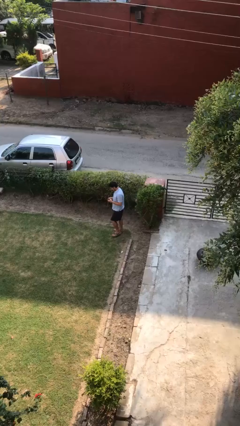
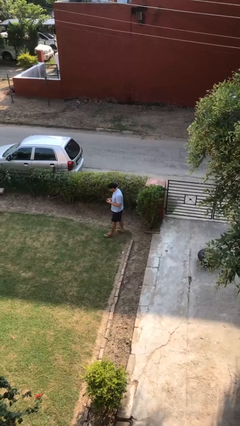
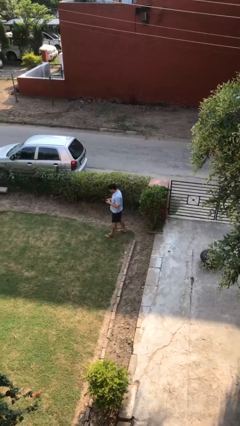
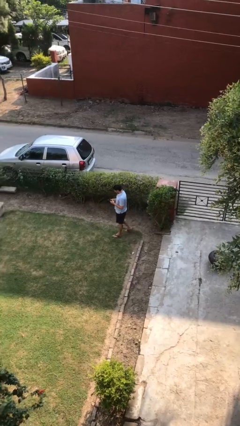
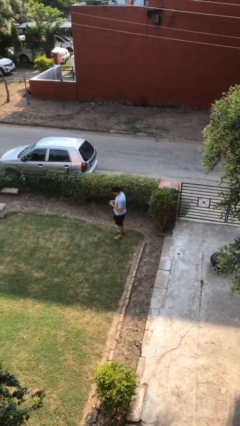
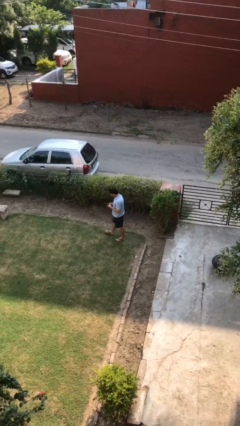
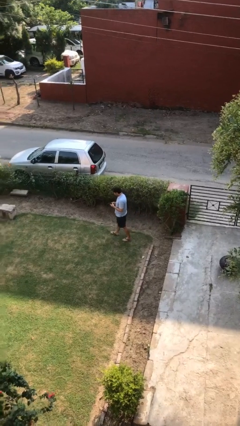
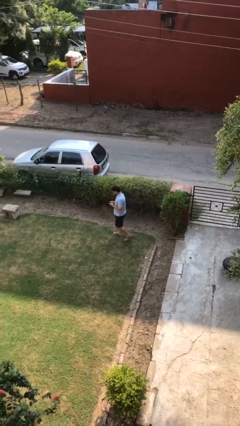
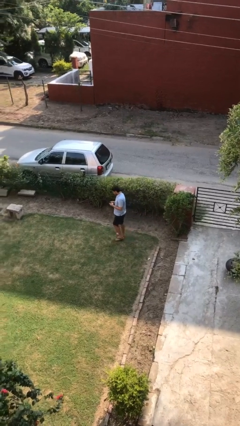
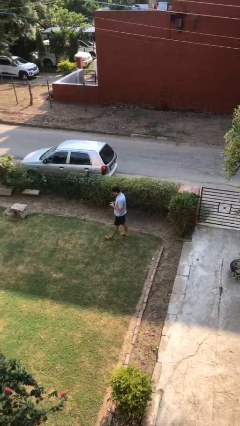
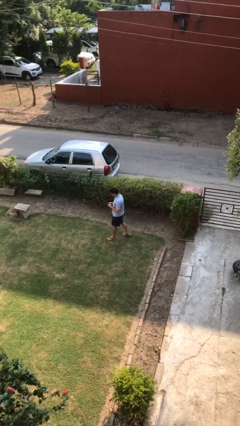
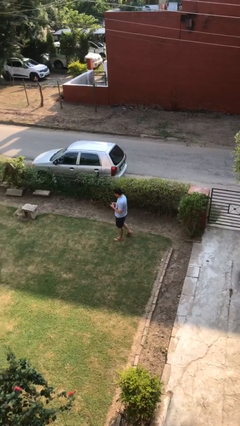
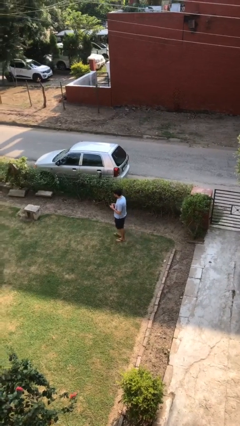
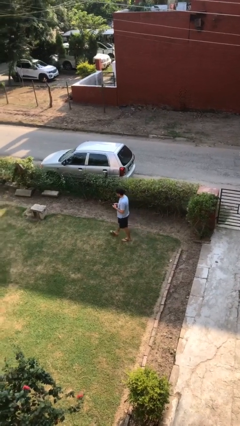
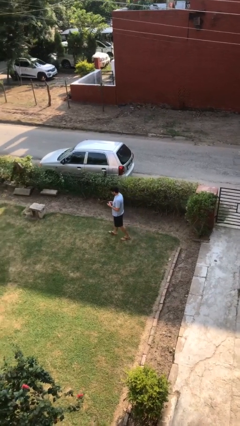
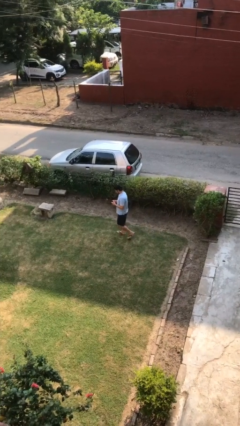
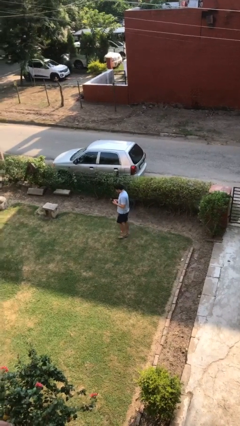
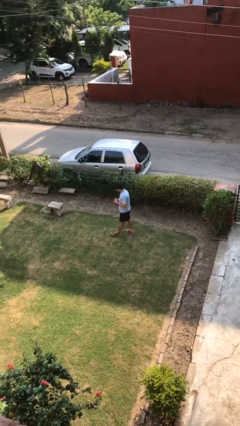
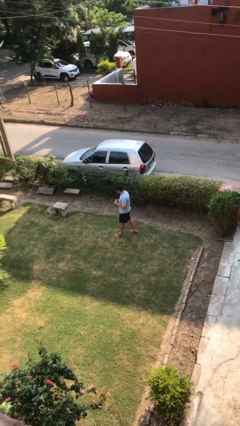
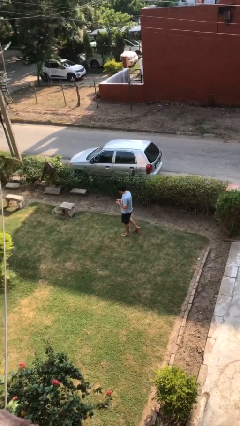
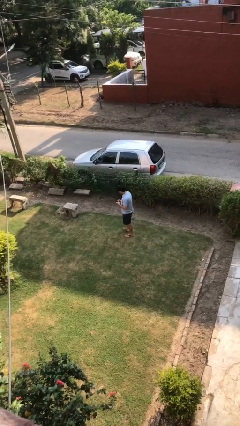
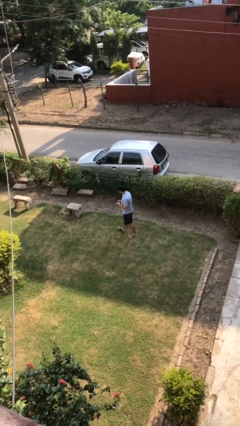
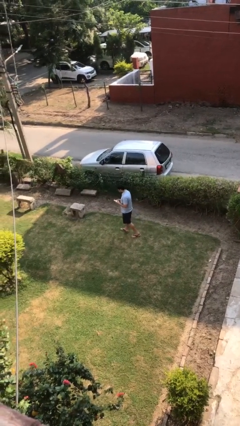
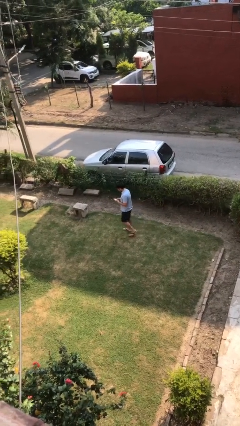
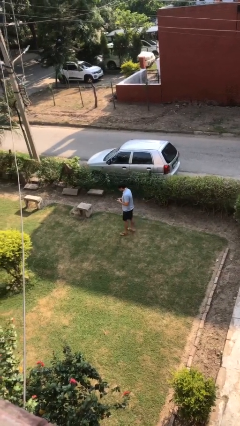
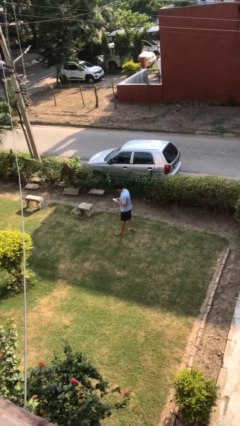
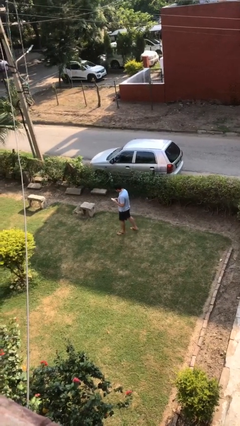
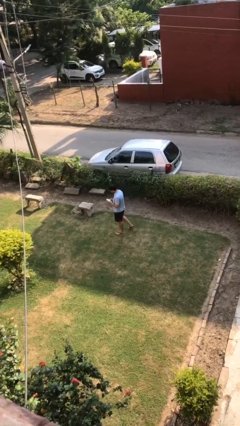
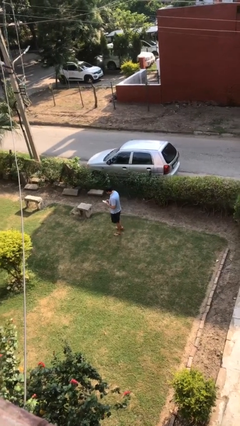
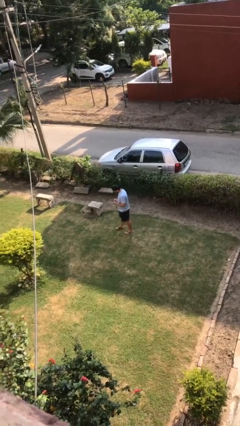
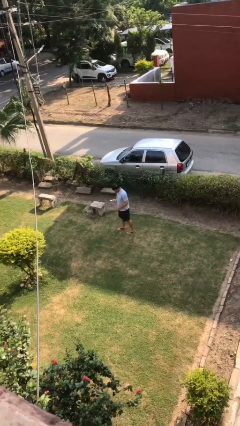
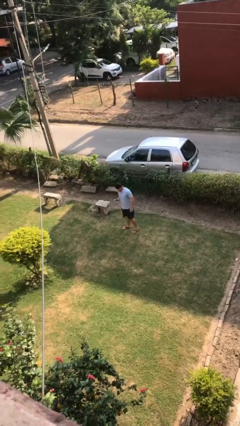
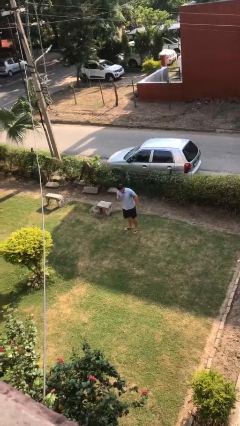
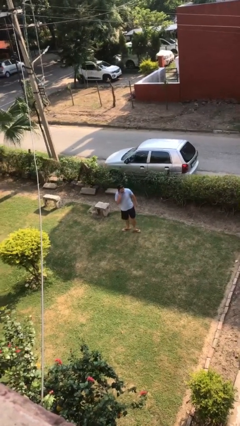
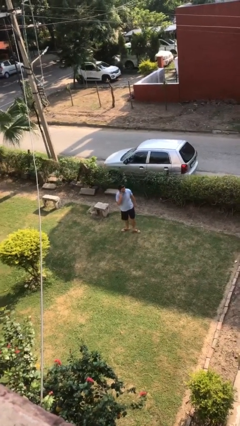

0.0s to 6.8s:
person texts on phone

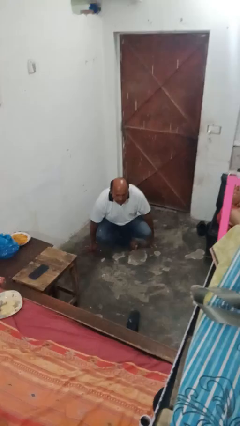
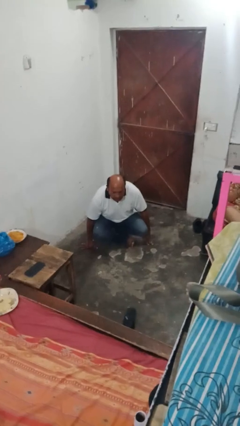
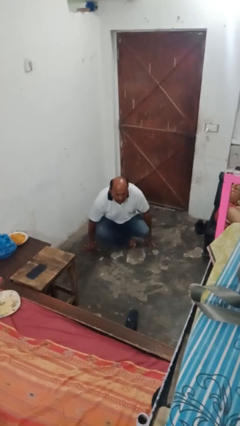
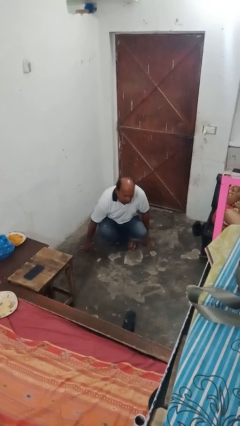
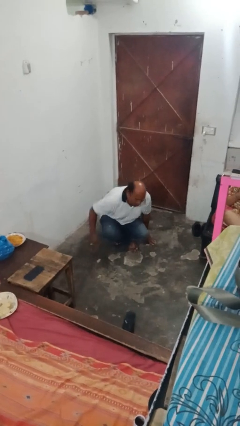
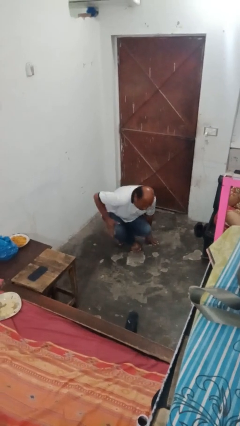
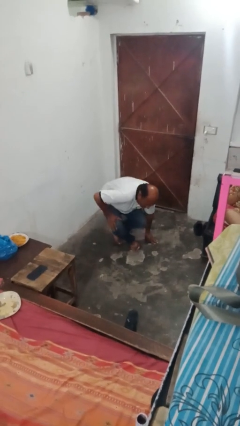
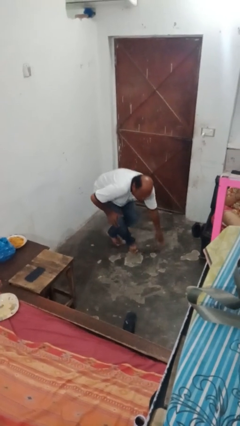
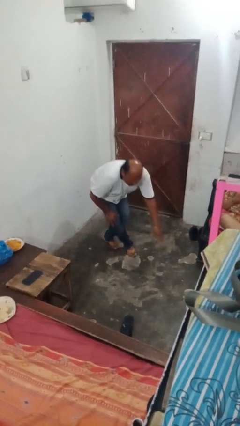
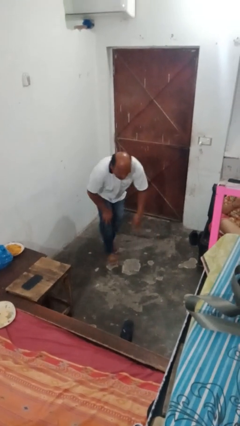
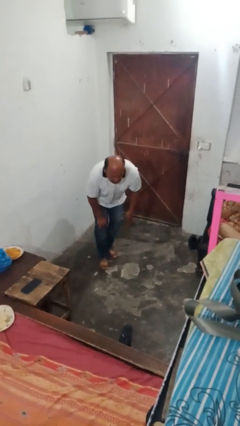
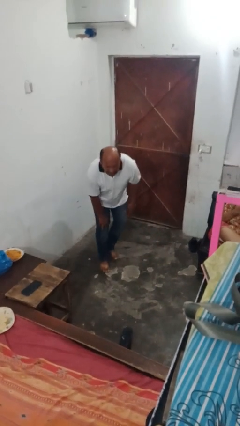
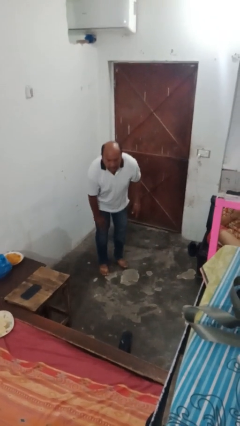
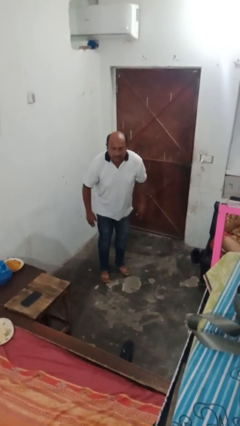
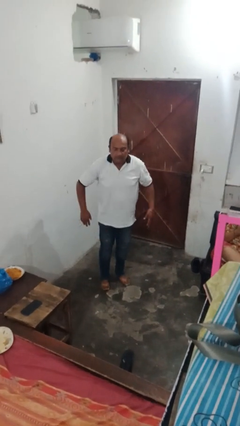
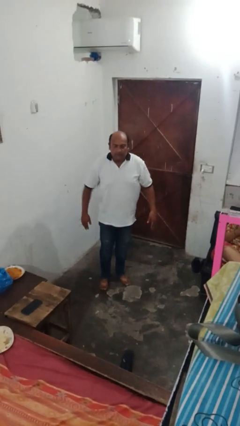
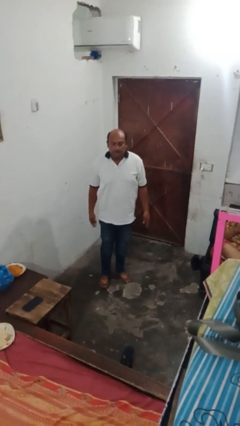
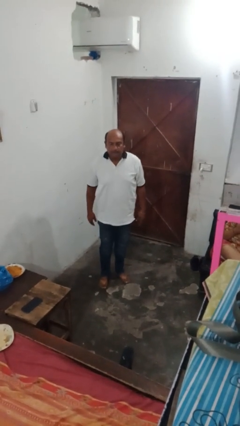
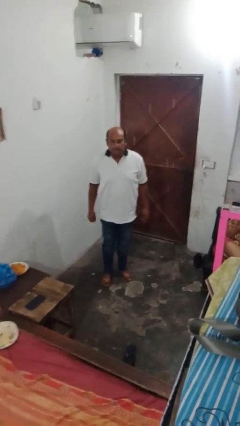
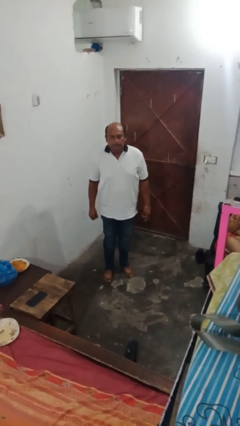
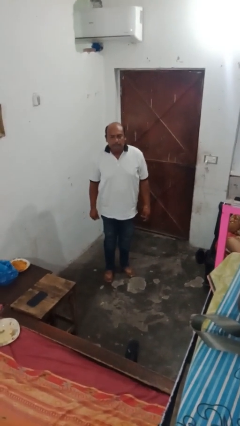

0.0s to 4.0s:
person stands up from floor

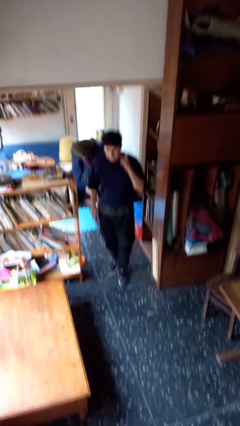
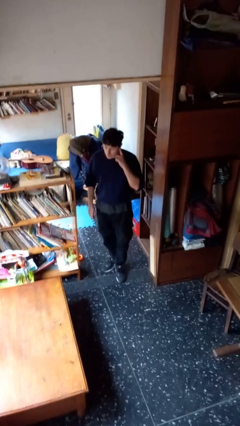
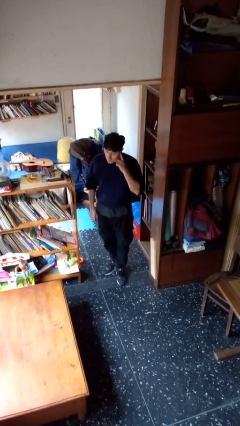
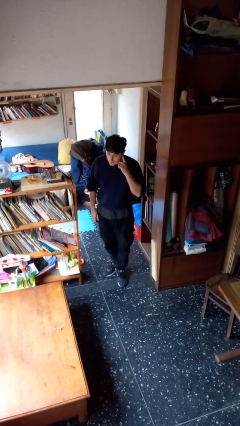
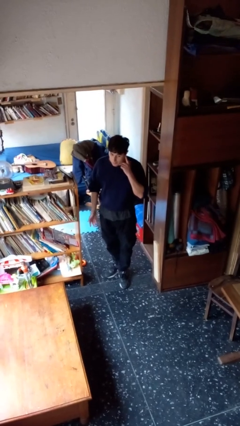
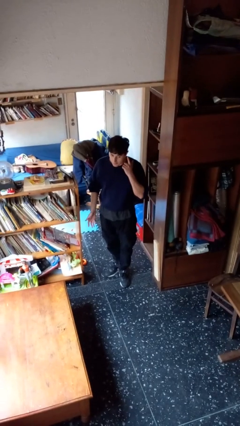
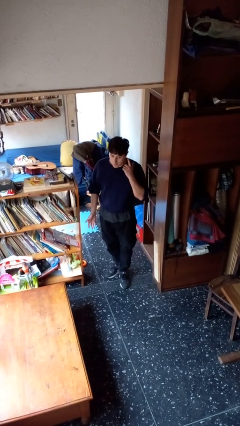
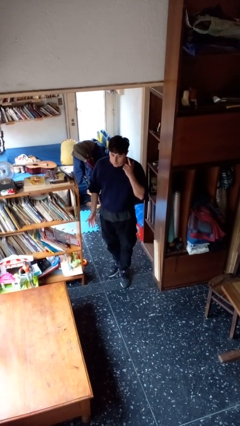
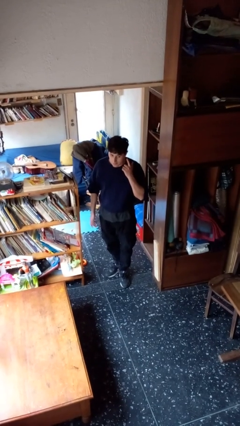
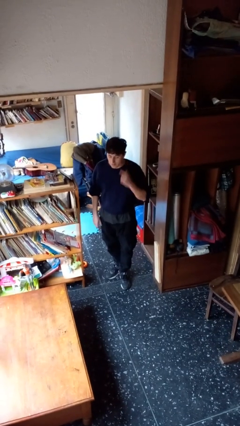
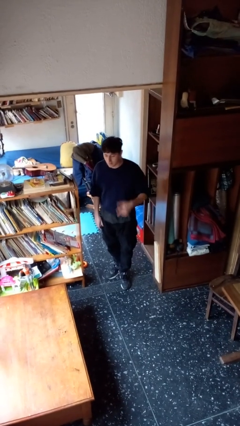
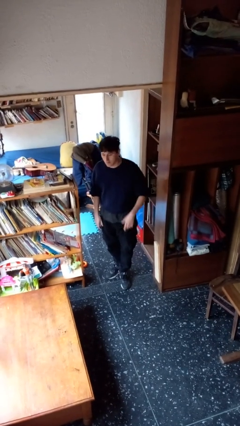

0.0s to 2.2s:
person gestures listen closely

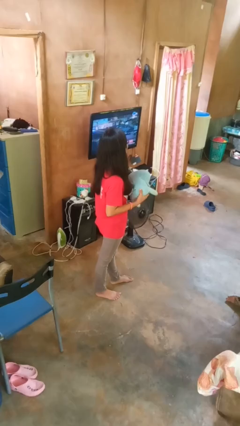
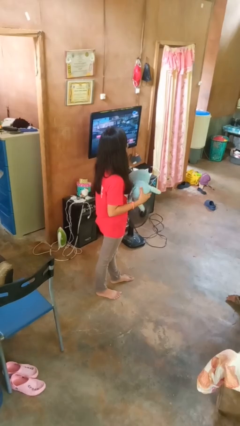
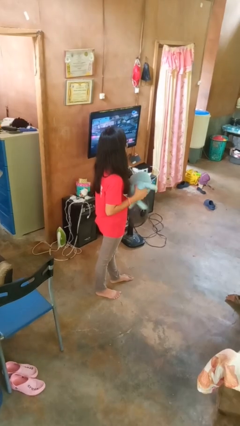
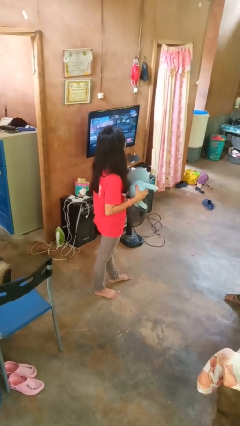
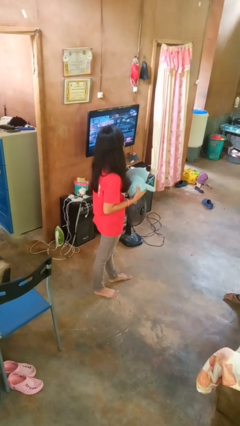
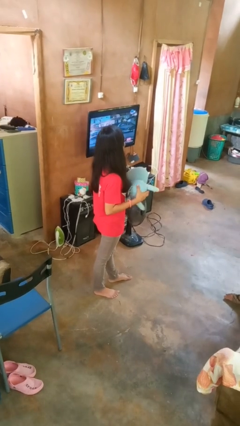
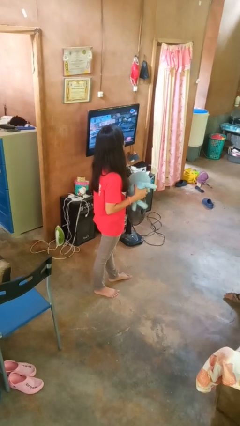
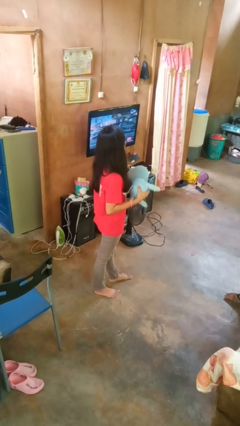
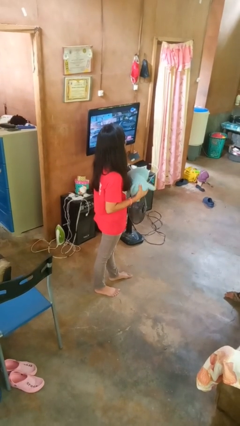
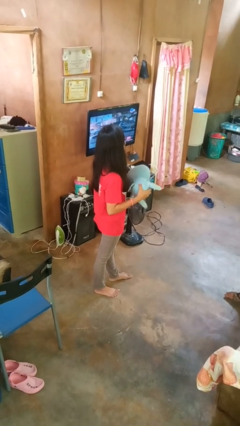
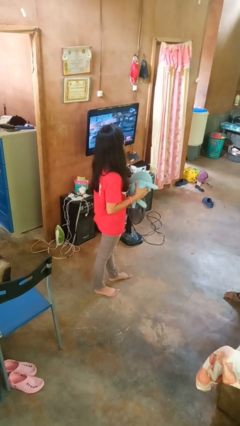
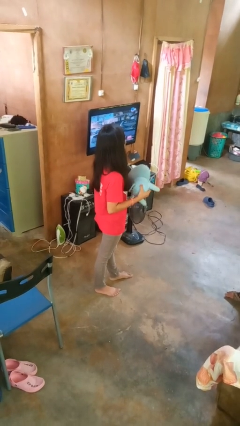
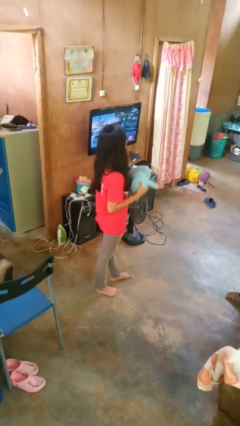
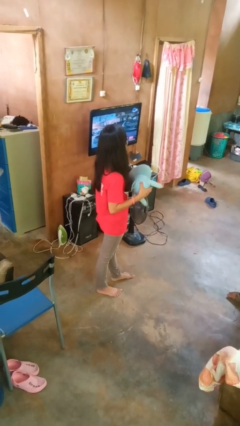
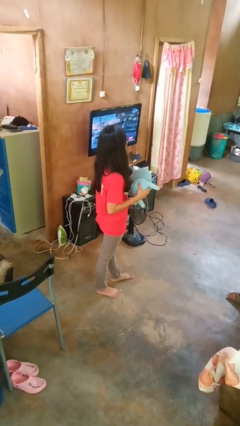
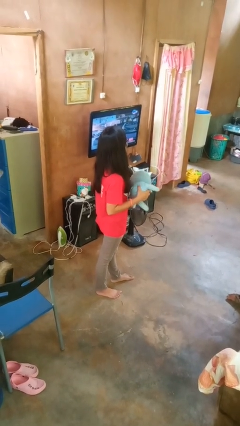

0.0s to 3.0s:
person squeezes object

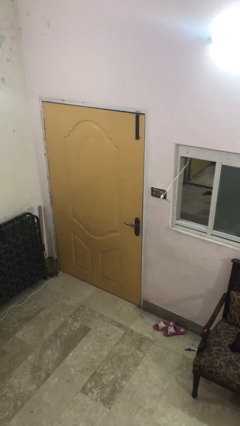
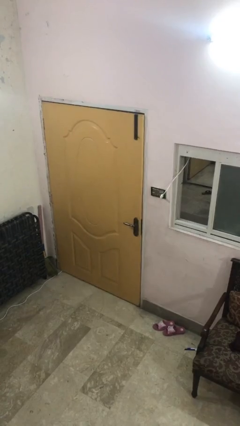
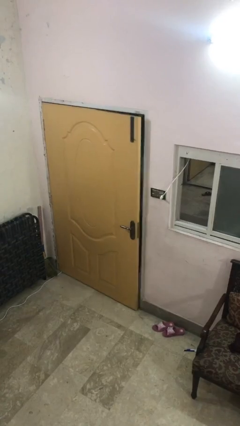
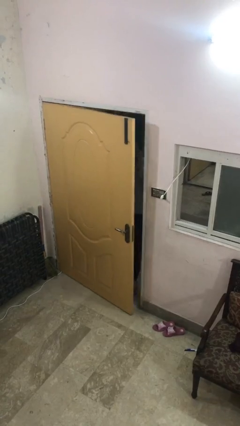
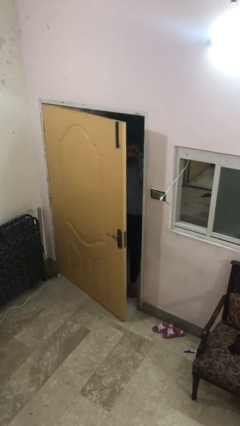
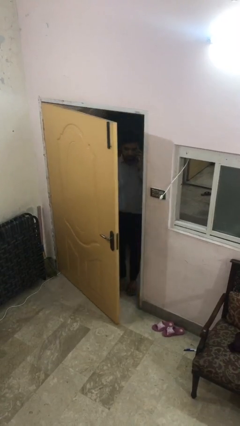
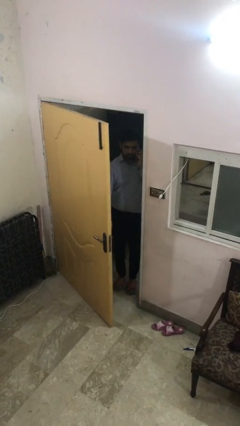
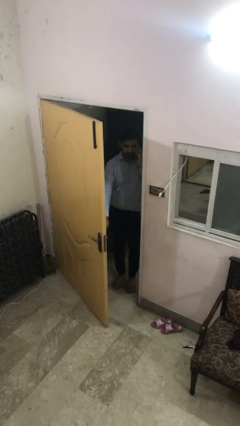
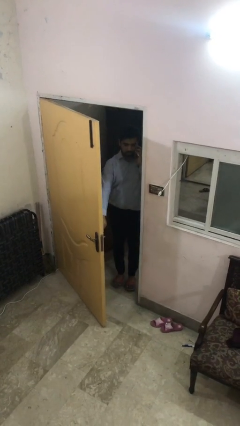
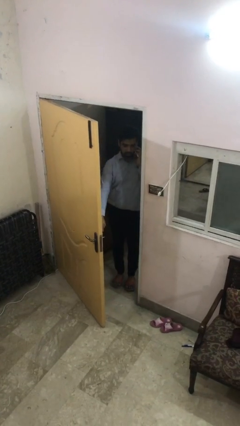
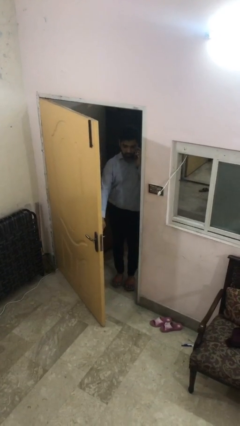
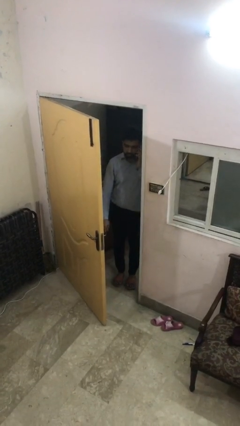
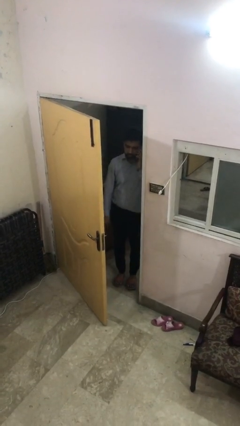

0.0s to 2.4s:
person opens facility door
